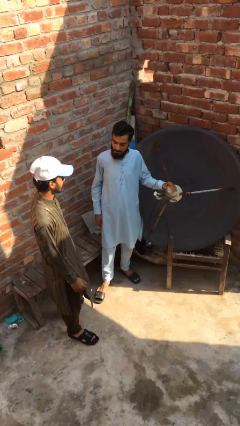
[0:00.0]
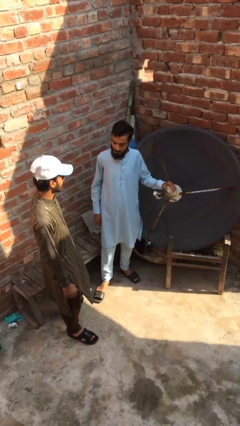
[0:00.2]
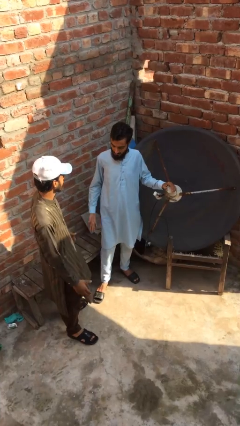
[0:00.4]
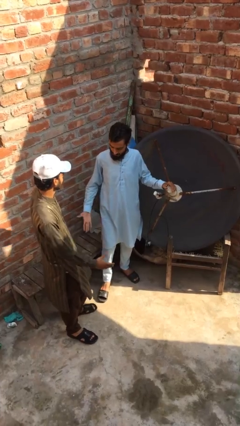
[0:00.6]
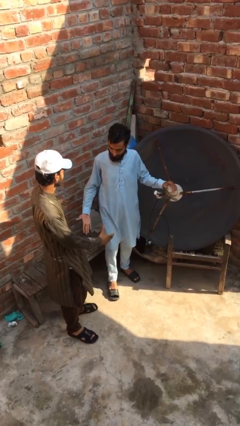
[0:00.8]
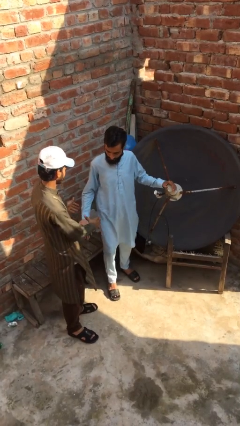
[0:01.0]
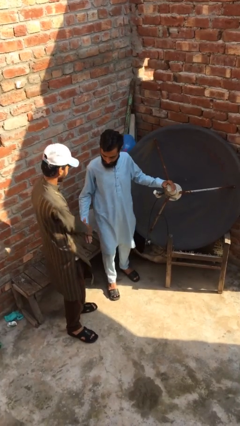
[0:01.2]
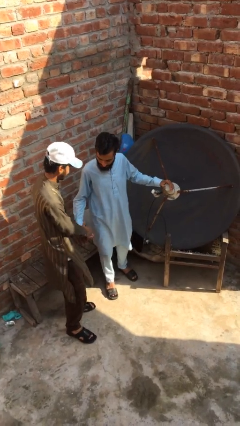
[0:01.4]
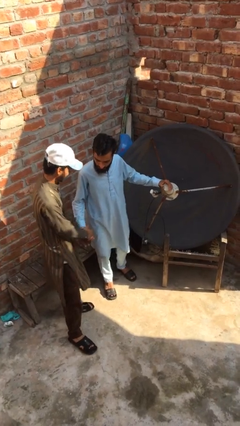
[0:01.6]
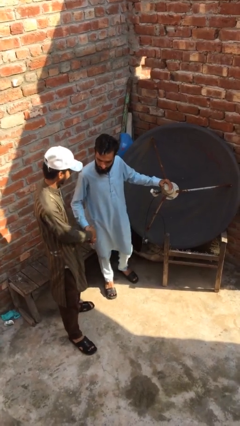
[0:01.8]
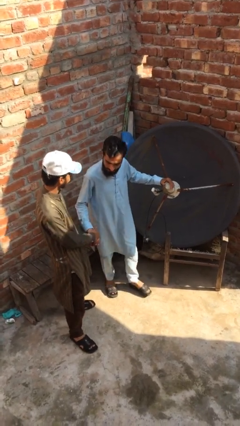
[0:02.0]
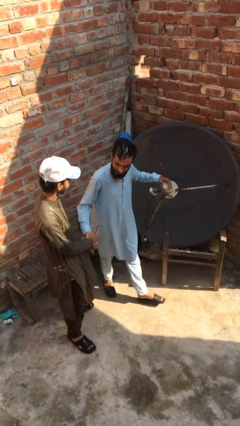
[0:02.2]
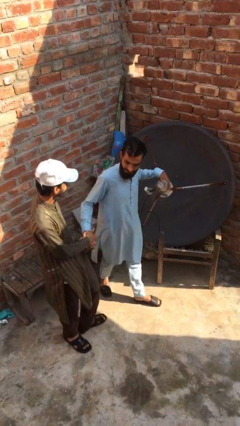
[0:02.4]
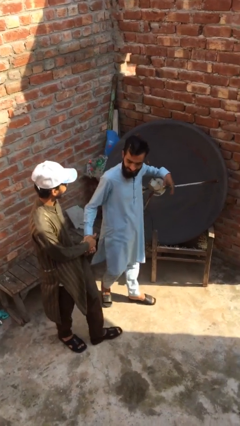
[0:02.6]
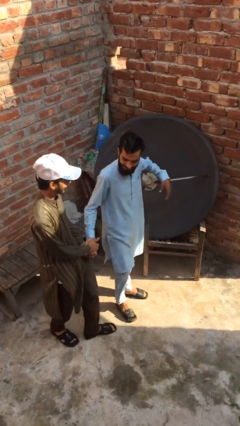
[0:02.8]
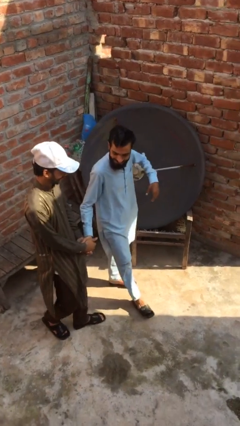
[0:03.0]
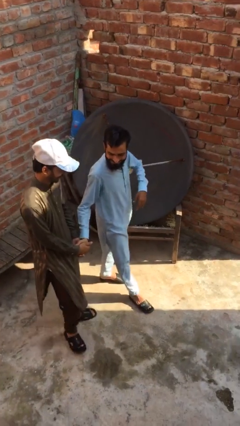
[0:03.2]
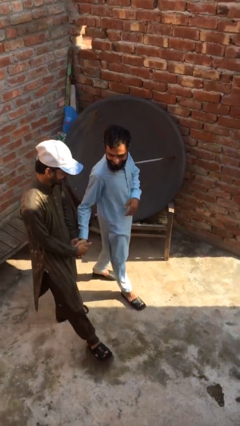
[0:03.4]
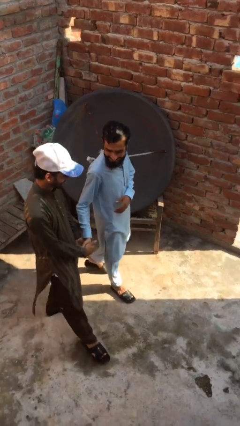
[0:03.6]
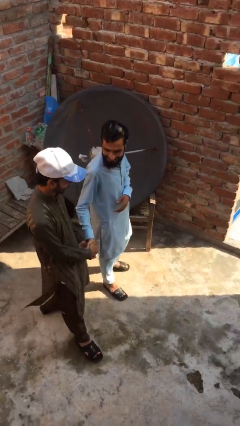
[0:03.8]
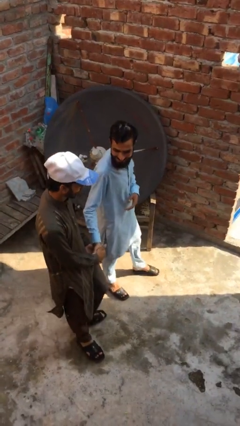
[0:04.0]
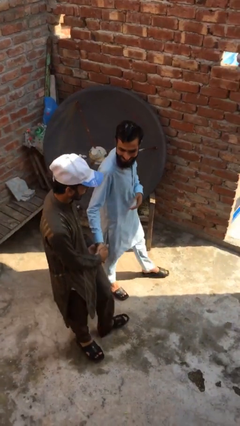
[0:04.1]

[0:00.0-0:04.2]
person holds hand

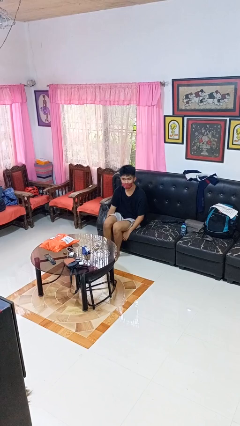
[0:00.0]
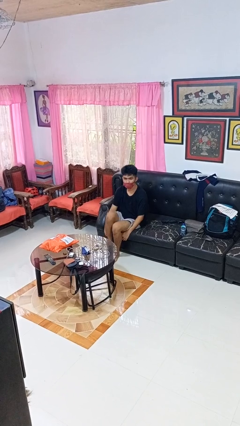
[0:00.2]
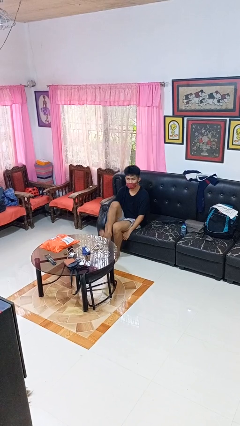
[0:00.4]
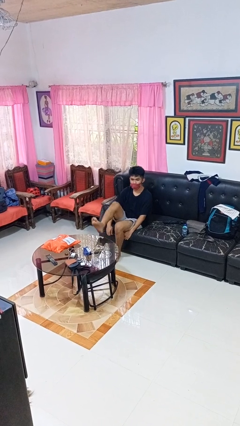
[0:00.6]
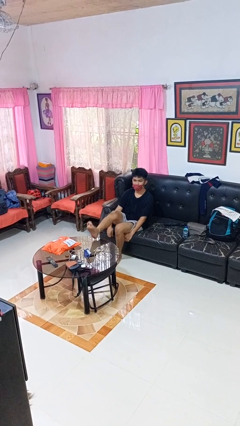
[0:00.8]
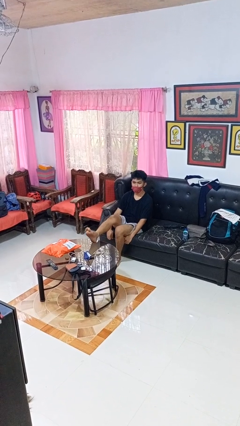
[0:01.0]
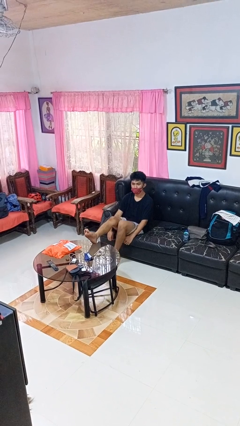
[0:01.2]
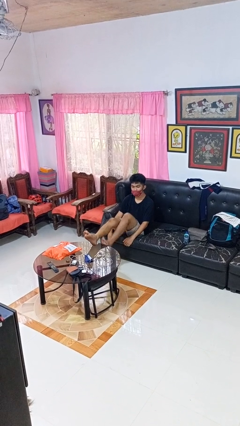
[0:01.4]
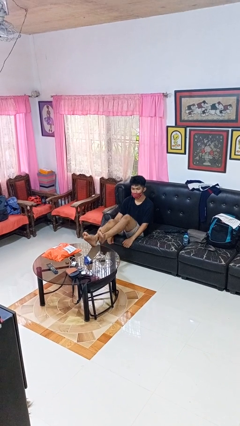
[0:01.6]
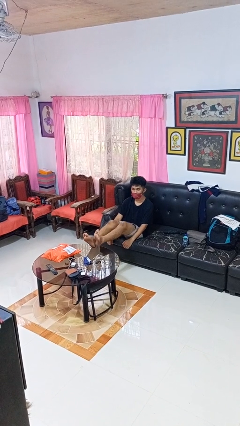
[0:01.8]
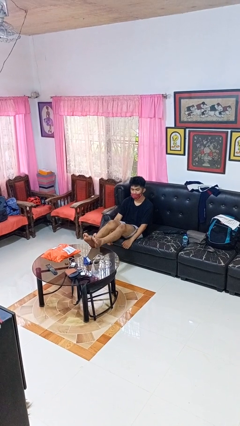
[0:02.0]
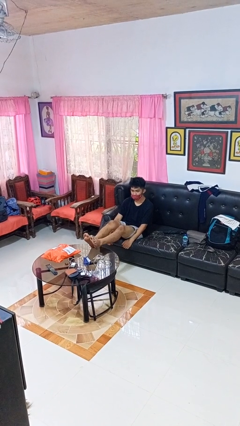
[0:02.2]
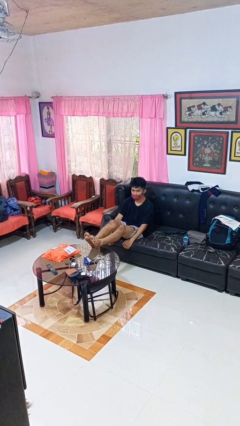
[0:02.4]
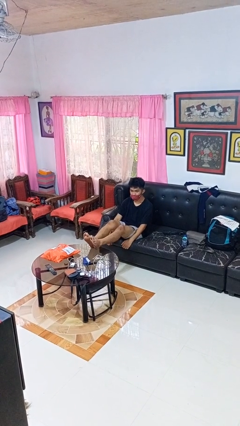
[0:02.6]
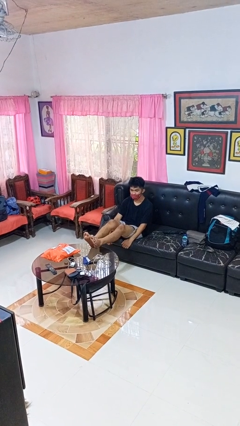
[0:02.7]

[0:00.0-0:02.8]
person puts feet up

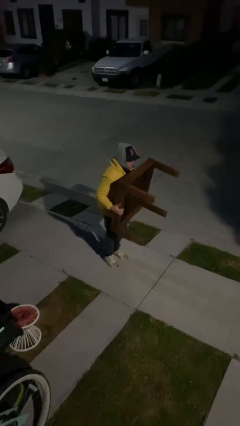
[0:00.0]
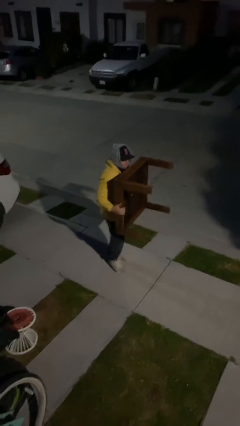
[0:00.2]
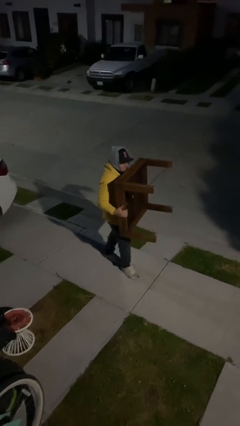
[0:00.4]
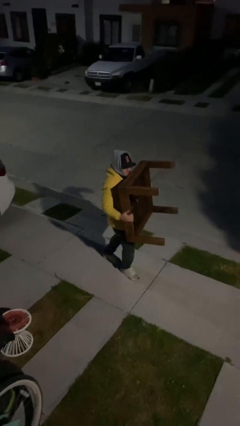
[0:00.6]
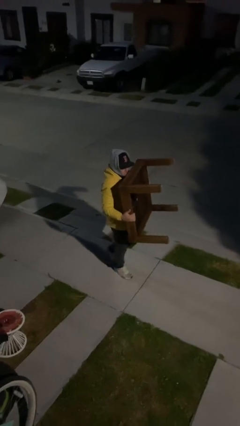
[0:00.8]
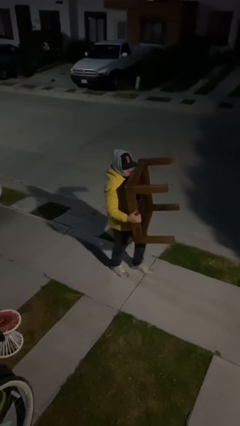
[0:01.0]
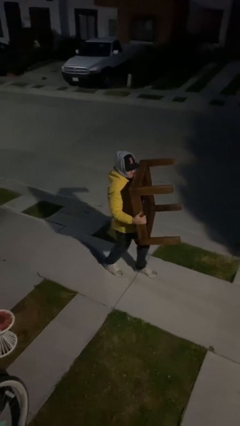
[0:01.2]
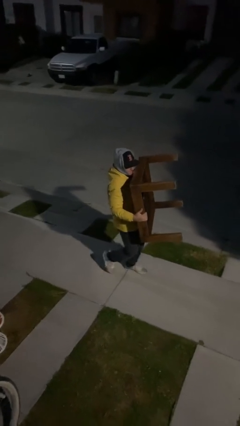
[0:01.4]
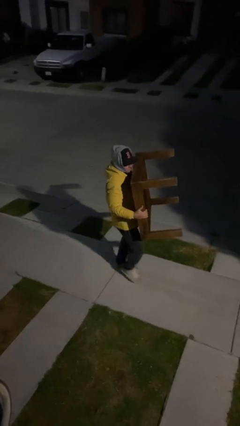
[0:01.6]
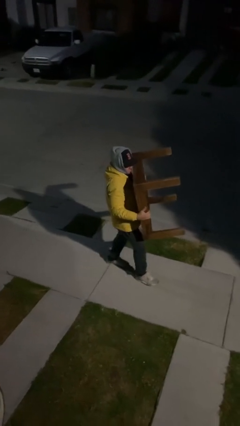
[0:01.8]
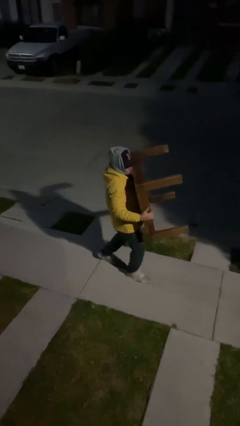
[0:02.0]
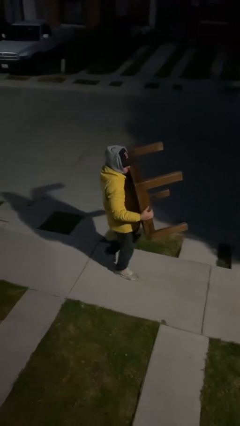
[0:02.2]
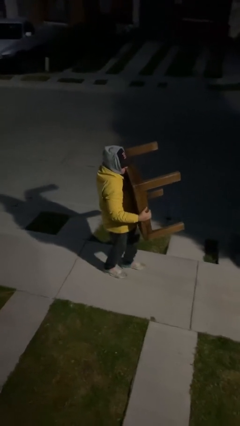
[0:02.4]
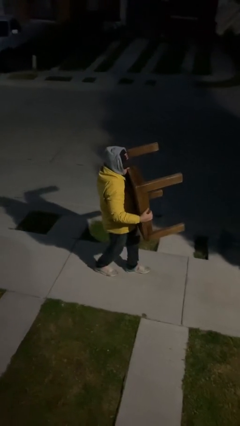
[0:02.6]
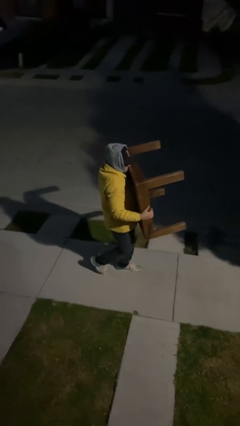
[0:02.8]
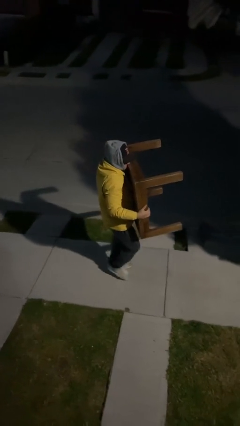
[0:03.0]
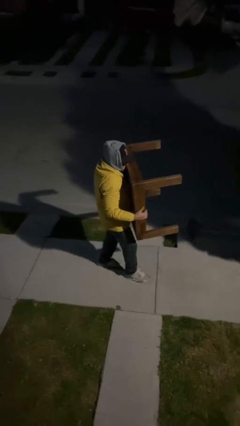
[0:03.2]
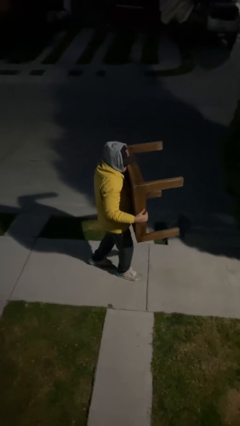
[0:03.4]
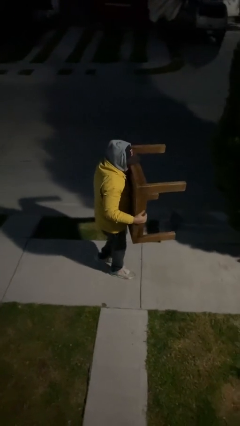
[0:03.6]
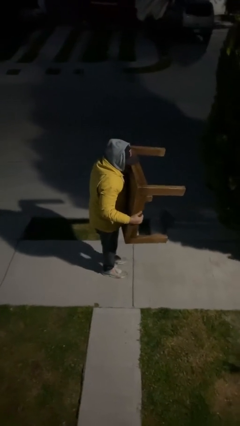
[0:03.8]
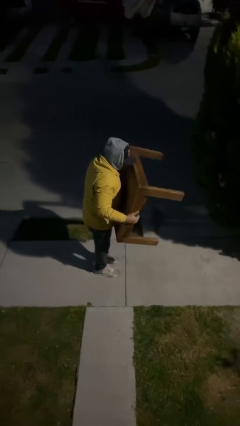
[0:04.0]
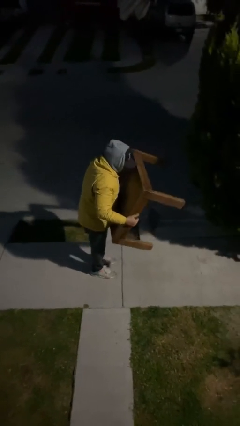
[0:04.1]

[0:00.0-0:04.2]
person carries heavy object

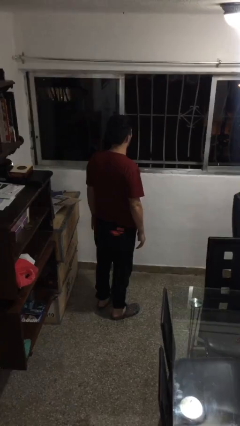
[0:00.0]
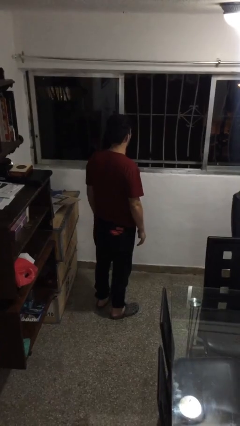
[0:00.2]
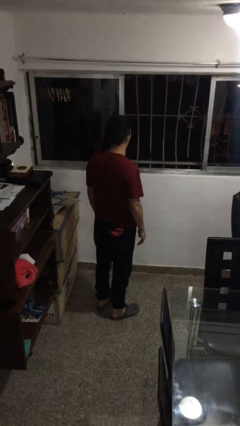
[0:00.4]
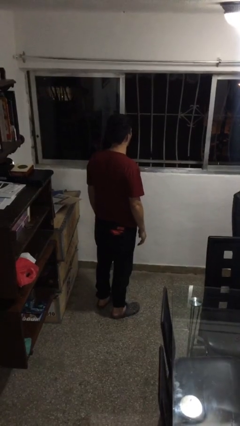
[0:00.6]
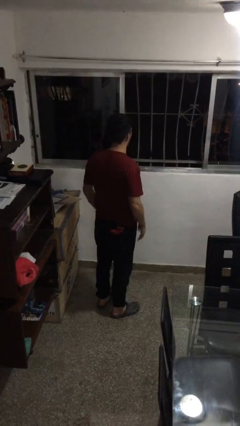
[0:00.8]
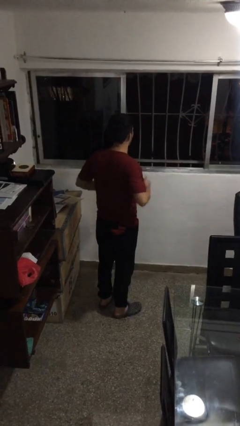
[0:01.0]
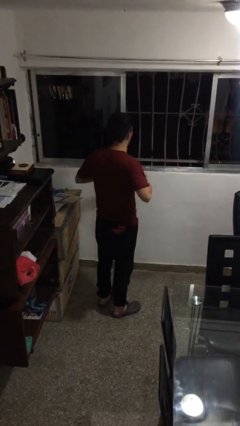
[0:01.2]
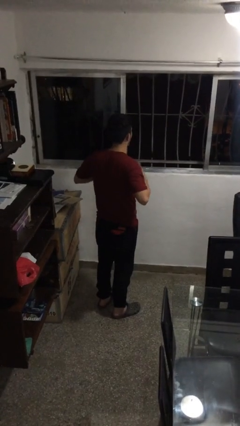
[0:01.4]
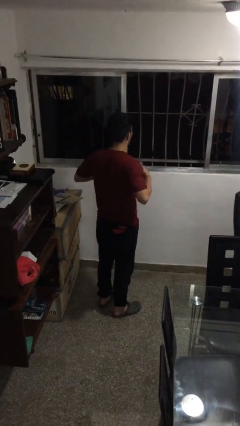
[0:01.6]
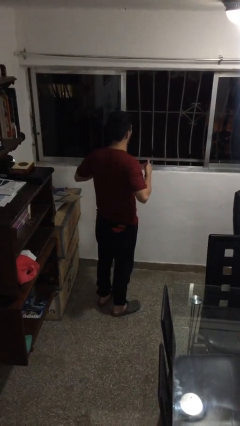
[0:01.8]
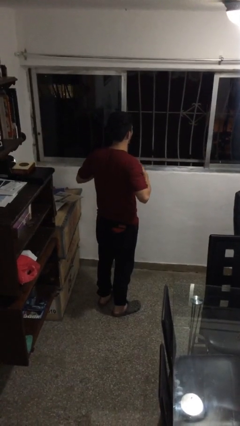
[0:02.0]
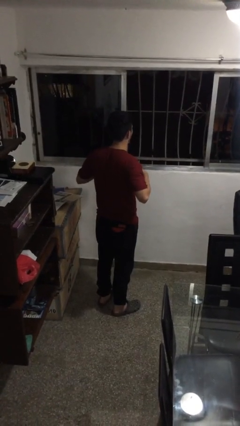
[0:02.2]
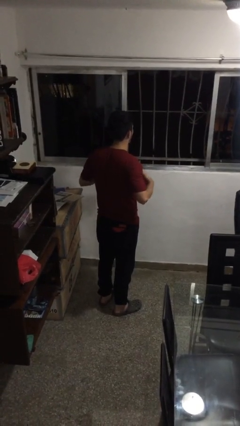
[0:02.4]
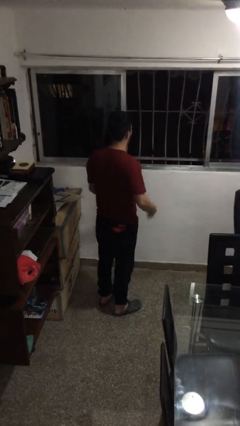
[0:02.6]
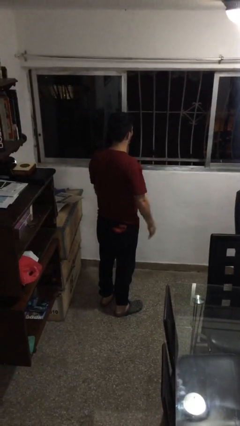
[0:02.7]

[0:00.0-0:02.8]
person drums on chest

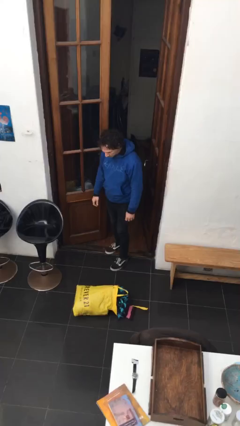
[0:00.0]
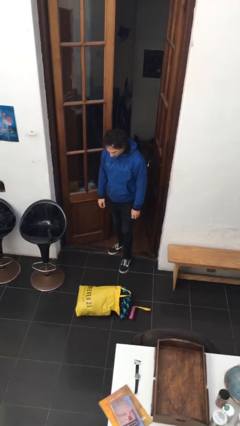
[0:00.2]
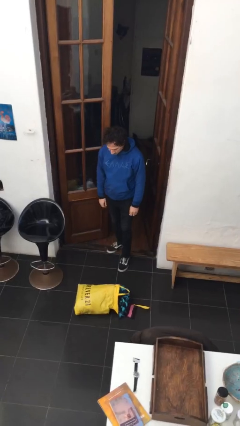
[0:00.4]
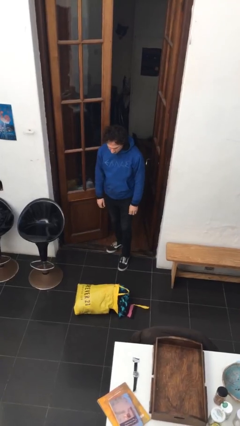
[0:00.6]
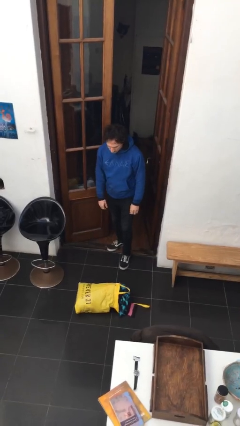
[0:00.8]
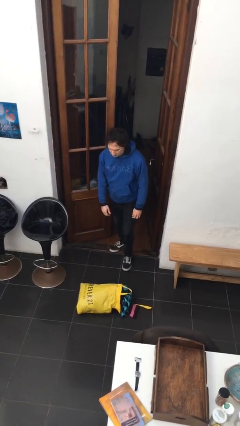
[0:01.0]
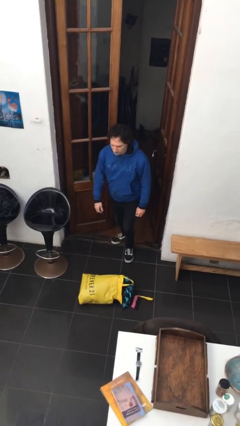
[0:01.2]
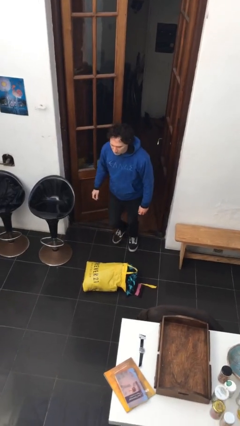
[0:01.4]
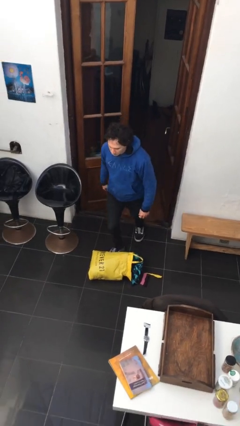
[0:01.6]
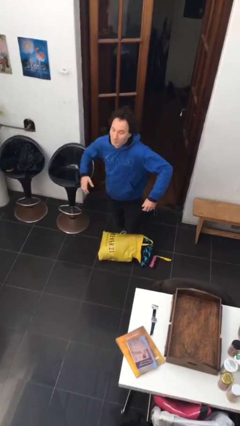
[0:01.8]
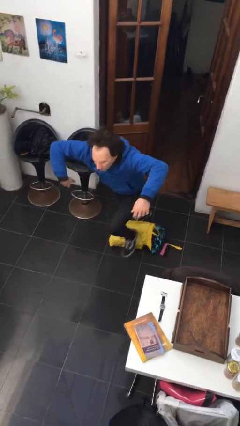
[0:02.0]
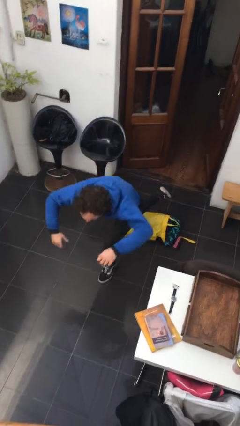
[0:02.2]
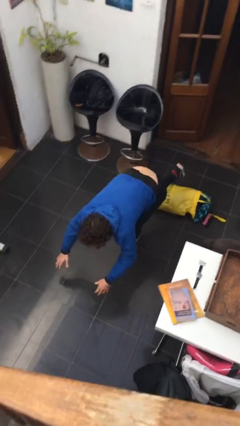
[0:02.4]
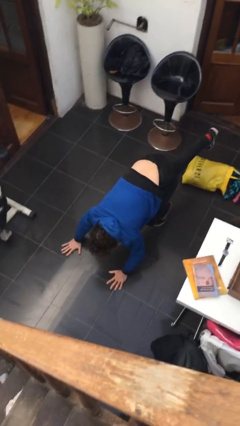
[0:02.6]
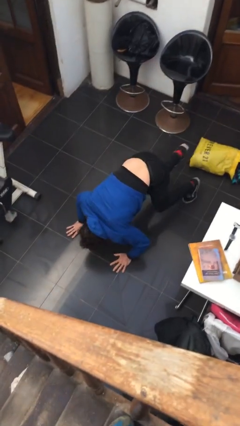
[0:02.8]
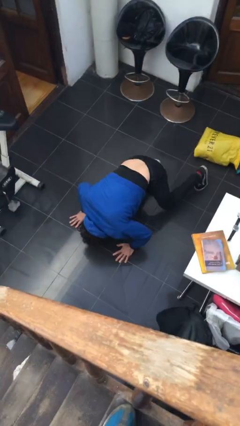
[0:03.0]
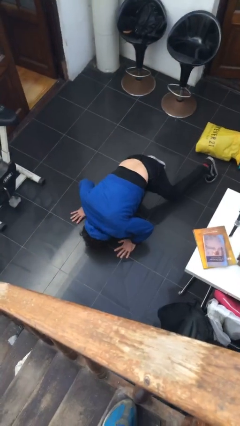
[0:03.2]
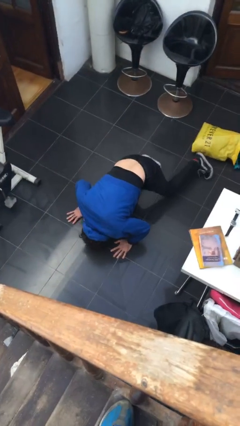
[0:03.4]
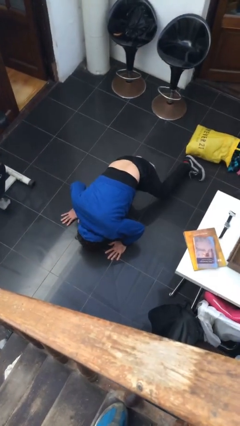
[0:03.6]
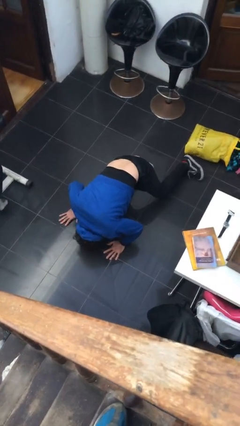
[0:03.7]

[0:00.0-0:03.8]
person trips on object on floor
